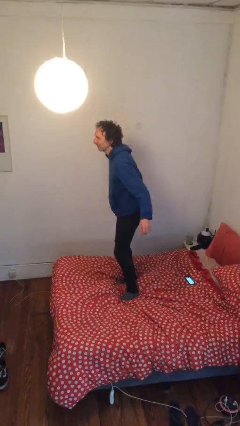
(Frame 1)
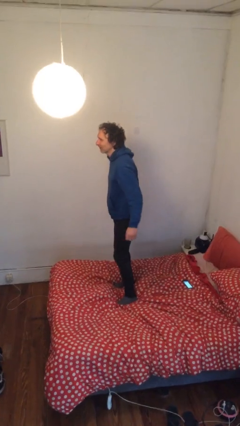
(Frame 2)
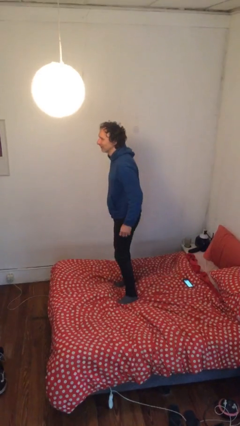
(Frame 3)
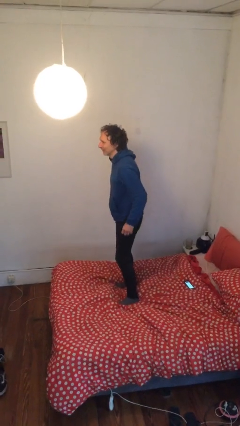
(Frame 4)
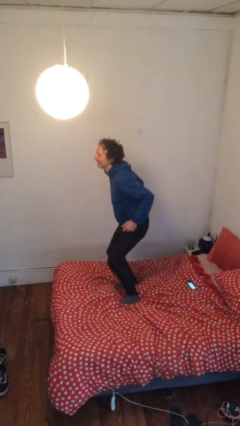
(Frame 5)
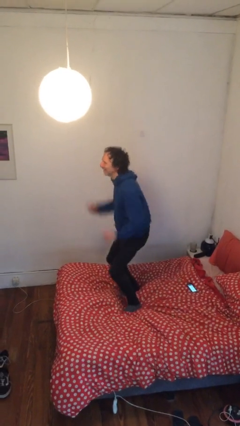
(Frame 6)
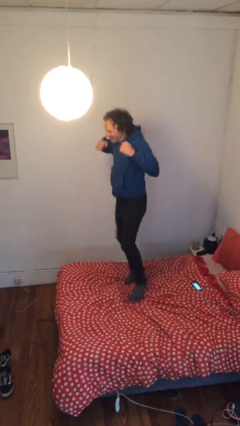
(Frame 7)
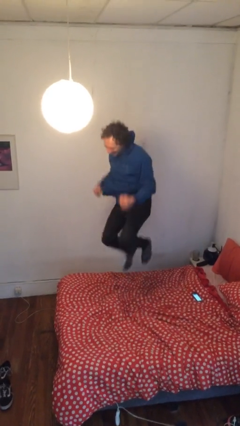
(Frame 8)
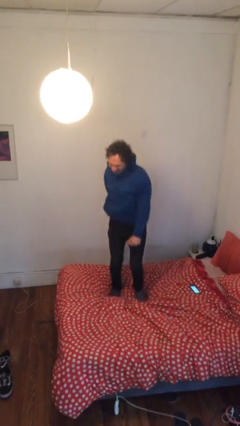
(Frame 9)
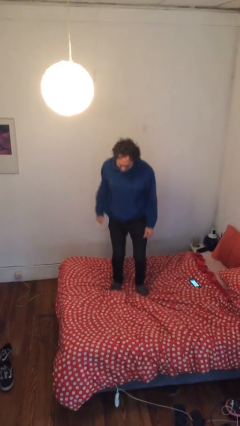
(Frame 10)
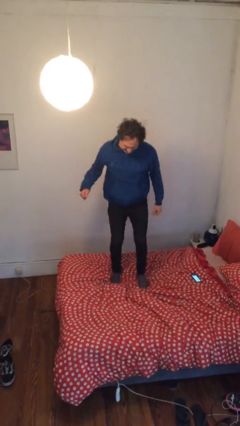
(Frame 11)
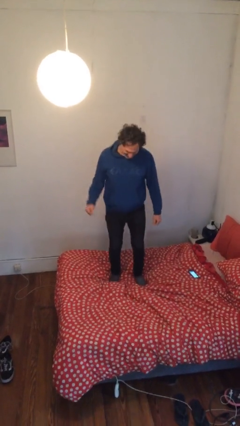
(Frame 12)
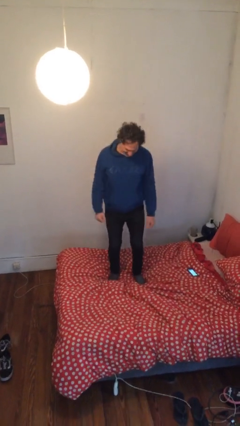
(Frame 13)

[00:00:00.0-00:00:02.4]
person jumps on bed

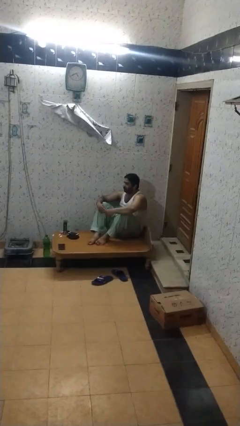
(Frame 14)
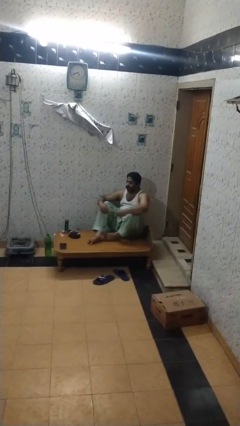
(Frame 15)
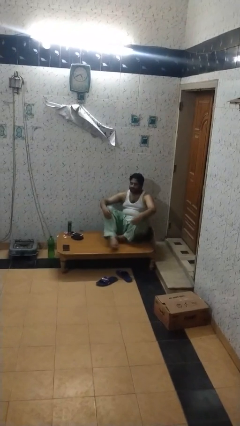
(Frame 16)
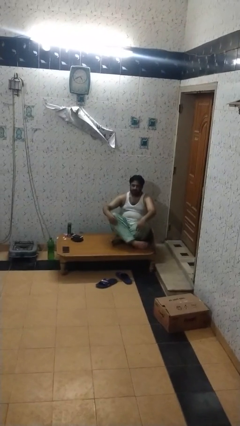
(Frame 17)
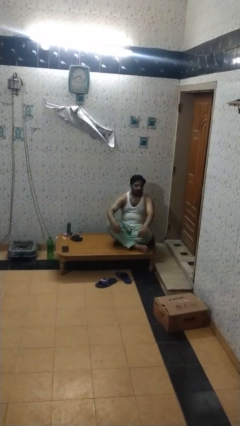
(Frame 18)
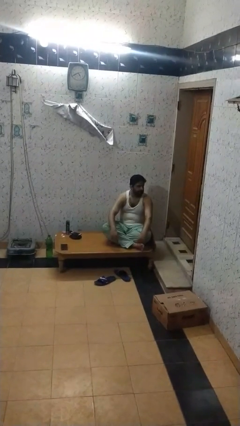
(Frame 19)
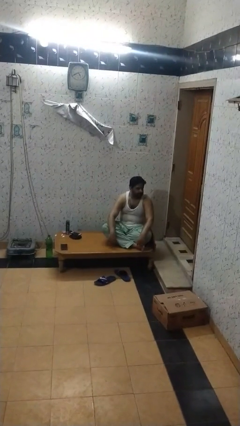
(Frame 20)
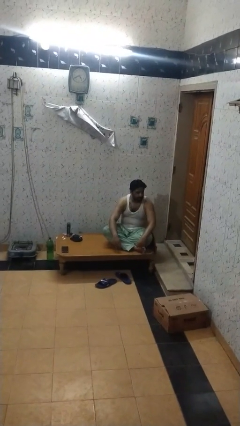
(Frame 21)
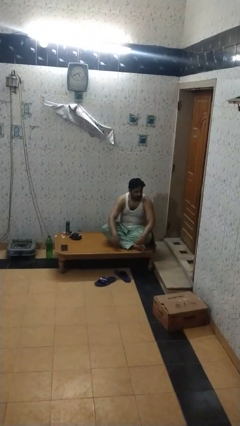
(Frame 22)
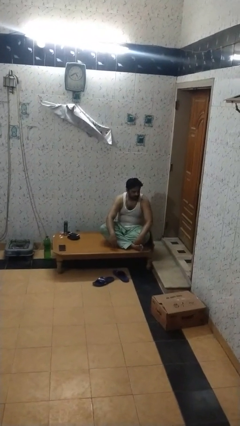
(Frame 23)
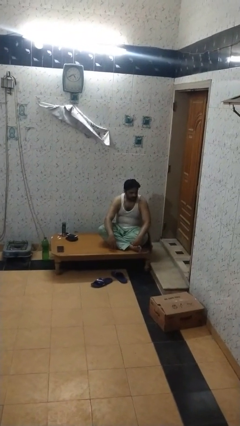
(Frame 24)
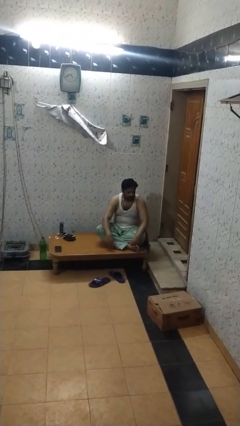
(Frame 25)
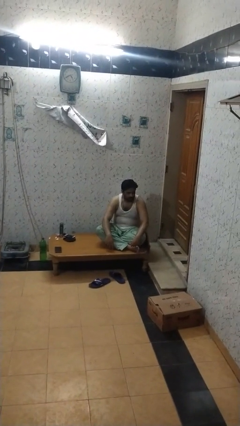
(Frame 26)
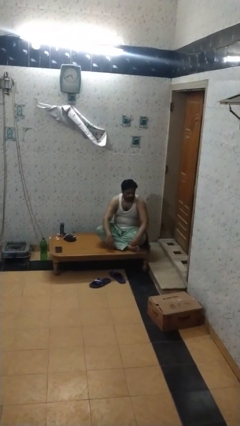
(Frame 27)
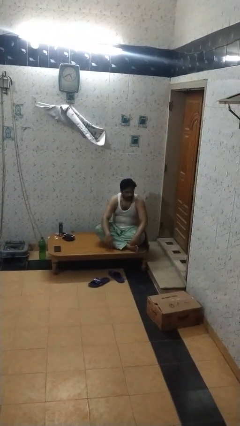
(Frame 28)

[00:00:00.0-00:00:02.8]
person crosses legs

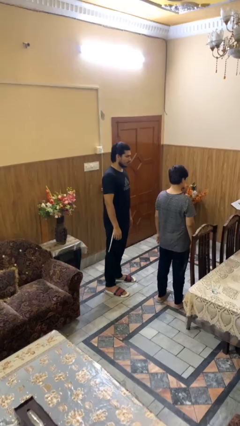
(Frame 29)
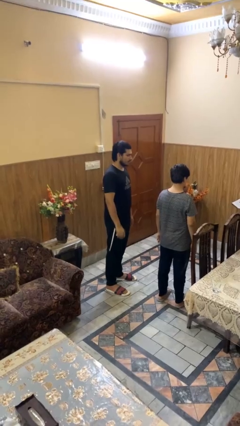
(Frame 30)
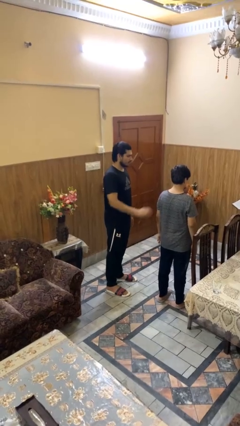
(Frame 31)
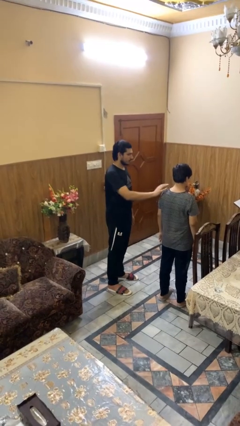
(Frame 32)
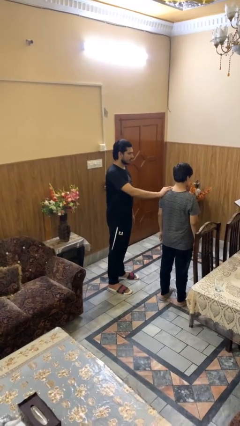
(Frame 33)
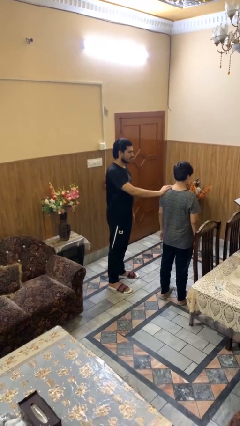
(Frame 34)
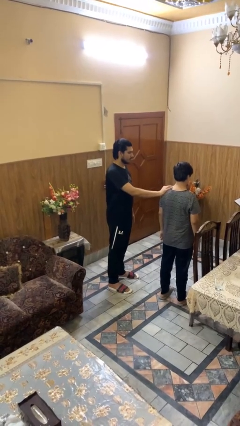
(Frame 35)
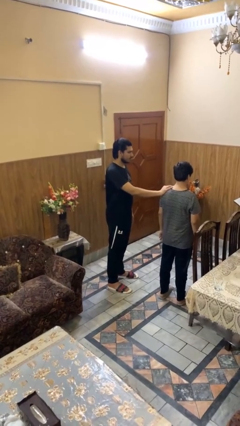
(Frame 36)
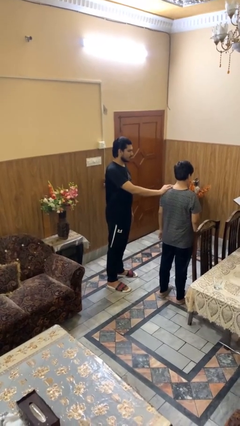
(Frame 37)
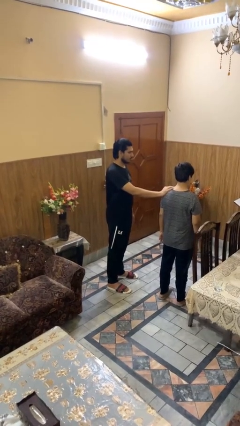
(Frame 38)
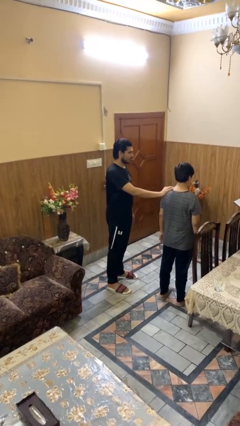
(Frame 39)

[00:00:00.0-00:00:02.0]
person grabs person by shoulder

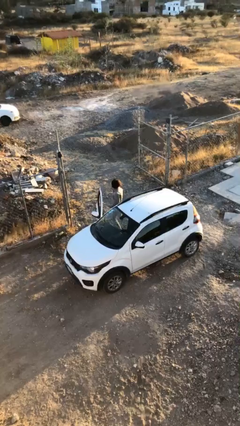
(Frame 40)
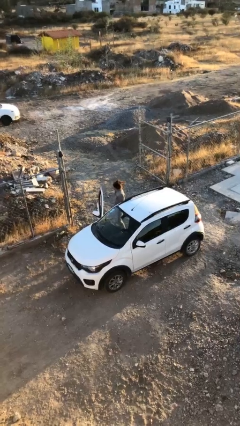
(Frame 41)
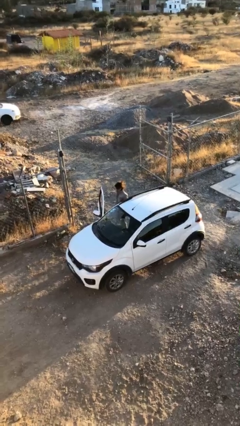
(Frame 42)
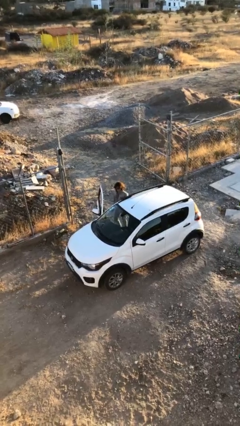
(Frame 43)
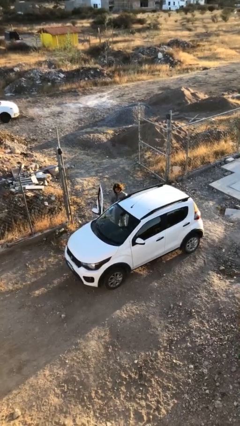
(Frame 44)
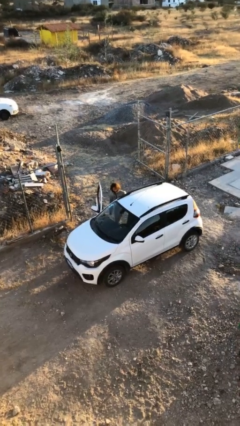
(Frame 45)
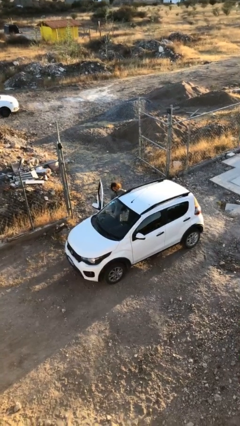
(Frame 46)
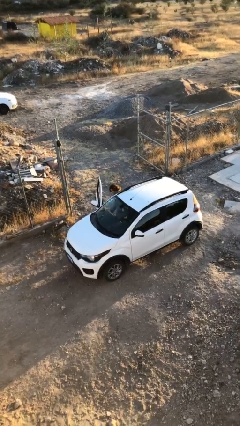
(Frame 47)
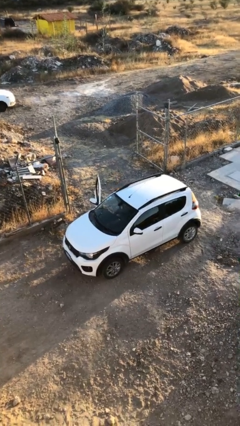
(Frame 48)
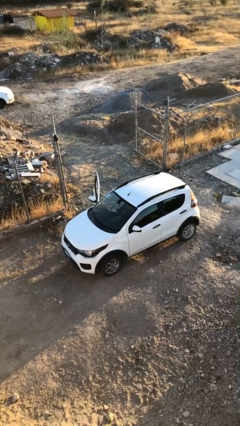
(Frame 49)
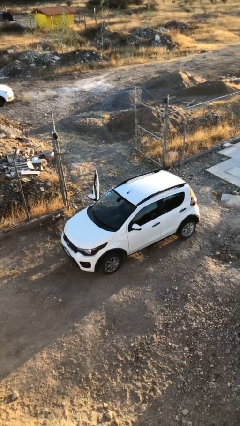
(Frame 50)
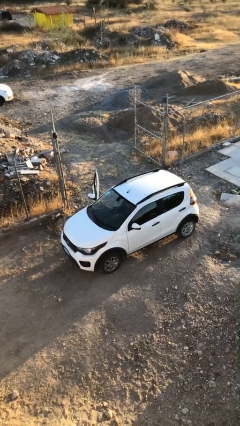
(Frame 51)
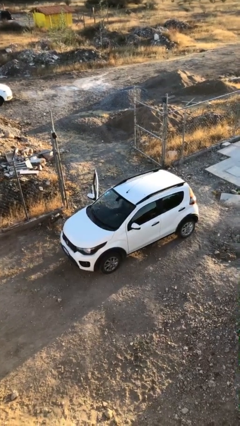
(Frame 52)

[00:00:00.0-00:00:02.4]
person enters car

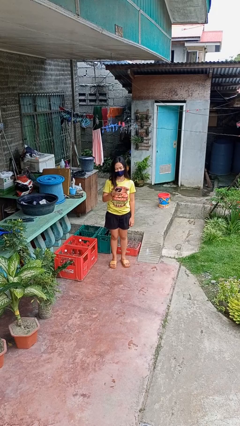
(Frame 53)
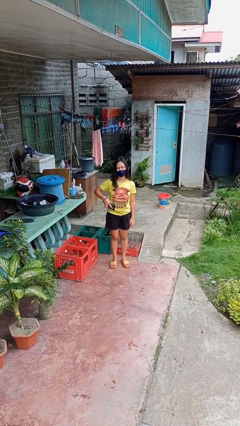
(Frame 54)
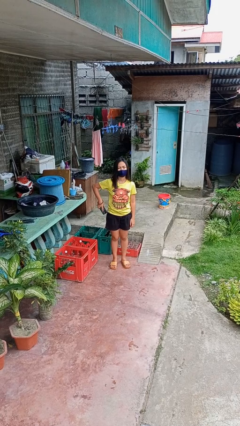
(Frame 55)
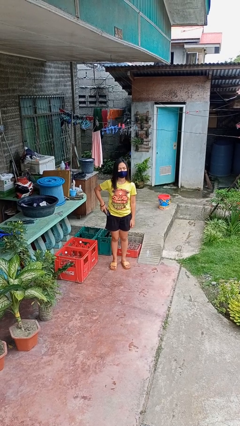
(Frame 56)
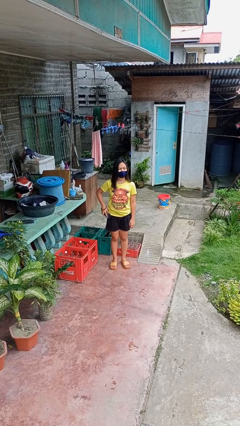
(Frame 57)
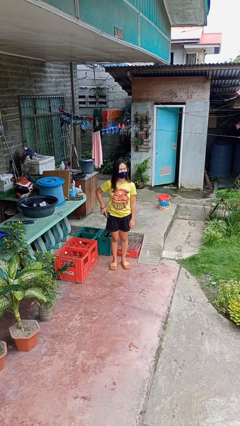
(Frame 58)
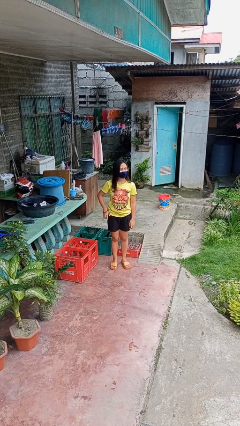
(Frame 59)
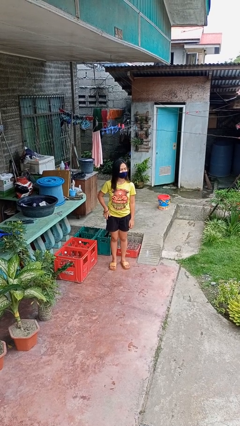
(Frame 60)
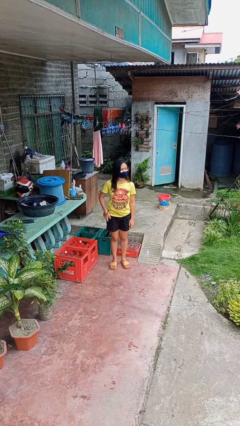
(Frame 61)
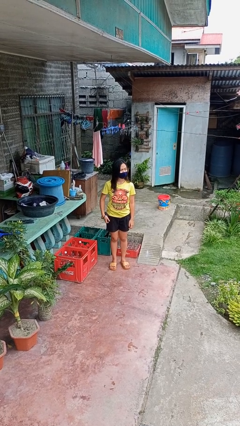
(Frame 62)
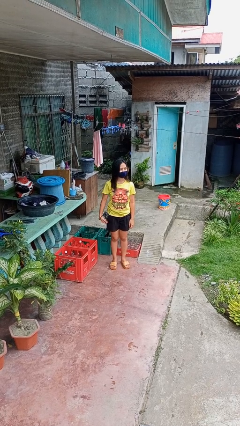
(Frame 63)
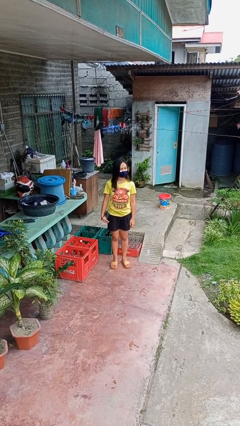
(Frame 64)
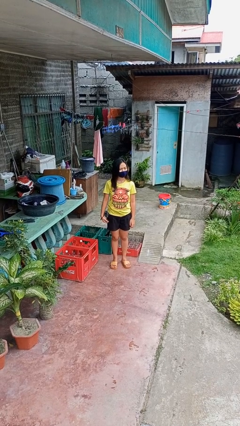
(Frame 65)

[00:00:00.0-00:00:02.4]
person puts phone into pocket

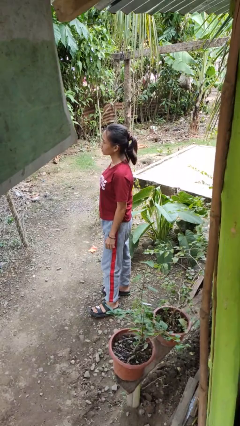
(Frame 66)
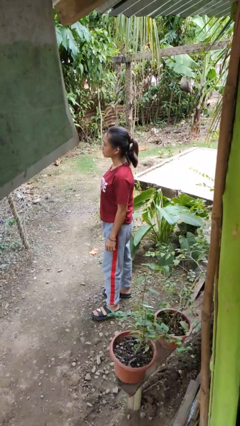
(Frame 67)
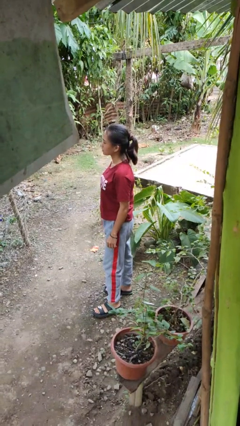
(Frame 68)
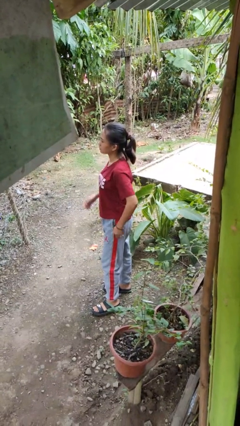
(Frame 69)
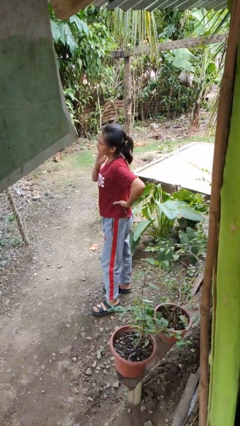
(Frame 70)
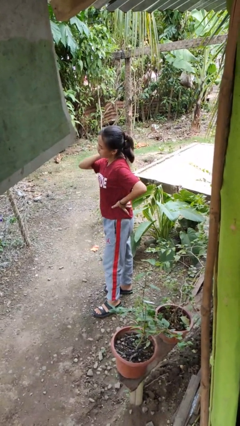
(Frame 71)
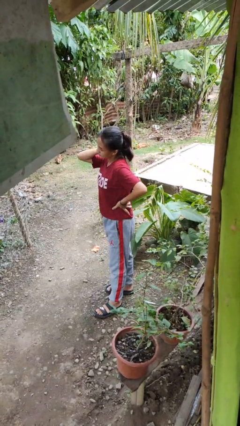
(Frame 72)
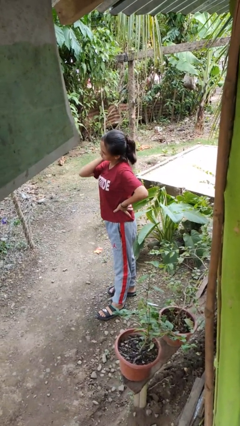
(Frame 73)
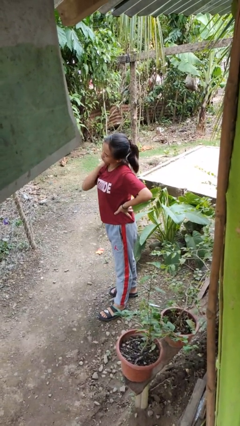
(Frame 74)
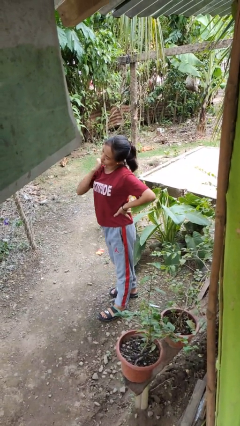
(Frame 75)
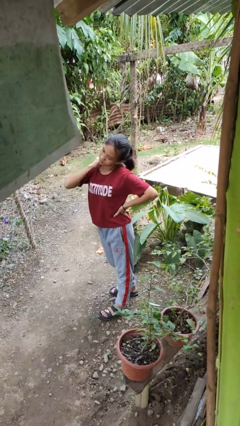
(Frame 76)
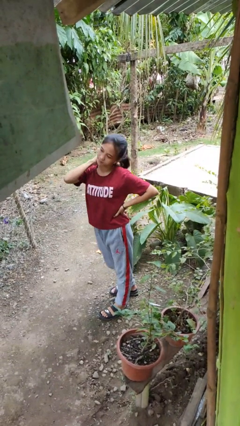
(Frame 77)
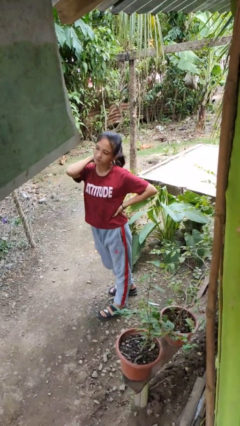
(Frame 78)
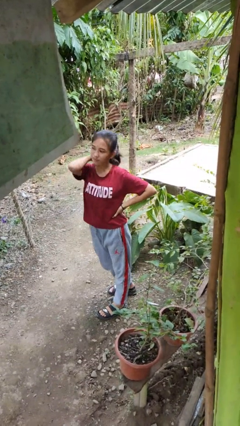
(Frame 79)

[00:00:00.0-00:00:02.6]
person rubs neck

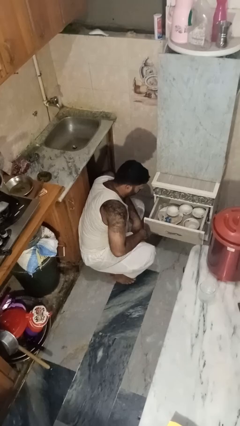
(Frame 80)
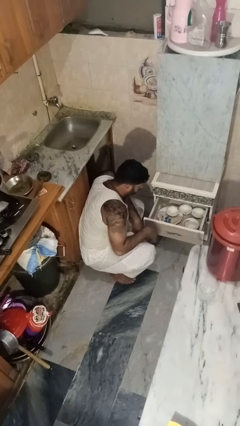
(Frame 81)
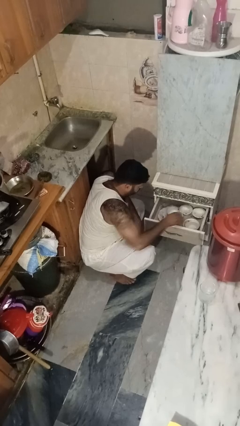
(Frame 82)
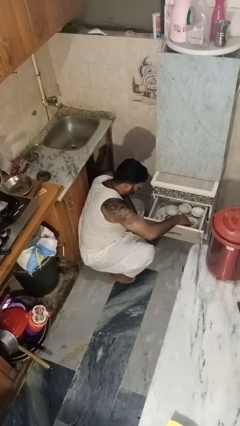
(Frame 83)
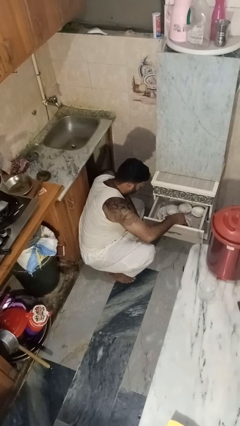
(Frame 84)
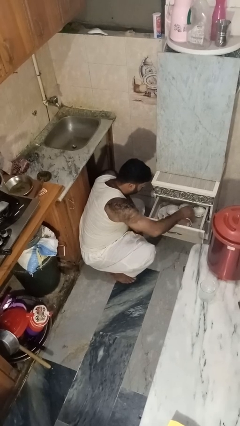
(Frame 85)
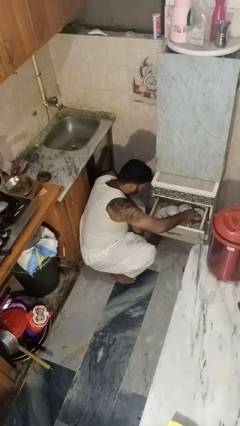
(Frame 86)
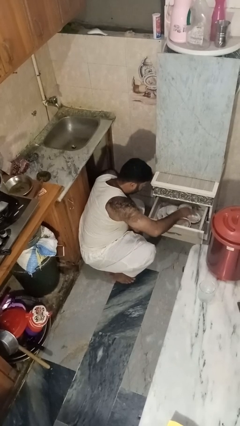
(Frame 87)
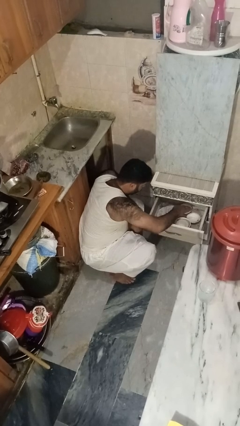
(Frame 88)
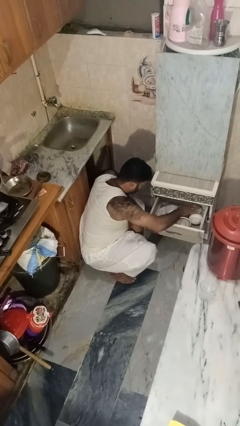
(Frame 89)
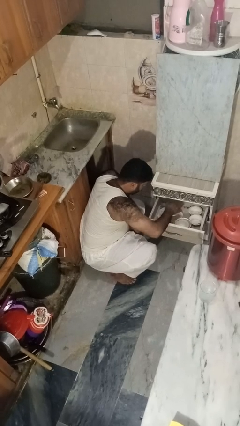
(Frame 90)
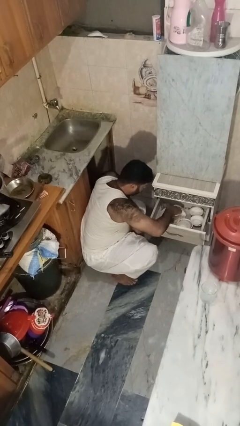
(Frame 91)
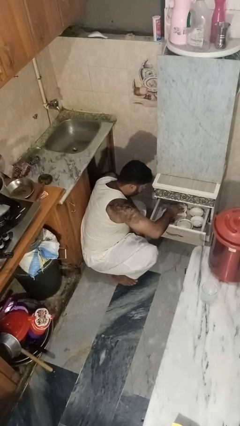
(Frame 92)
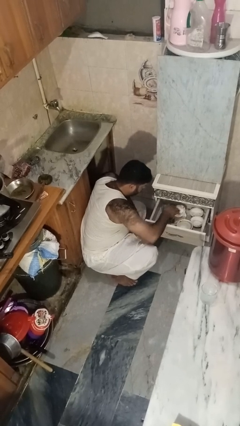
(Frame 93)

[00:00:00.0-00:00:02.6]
person searches in kitchen drawer
